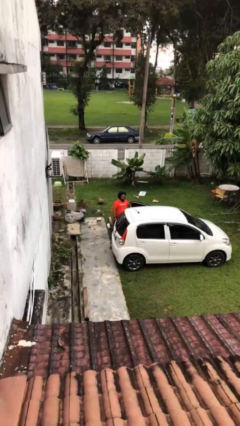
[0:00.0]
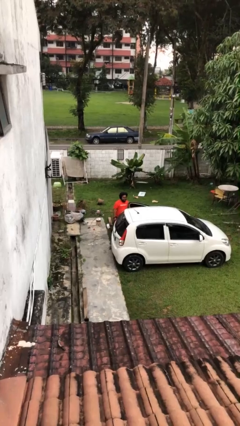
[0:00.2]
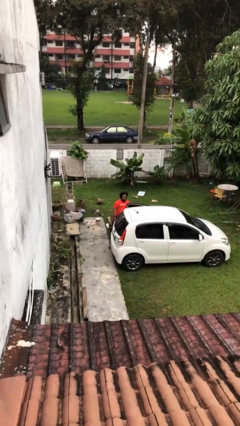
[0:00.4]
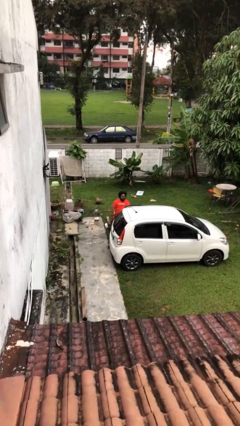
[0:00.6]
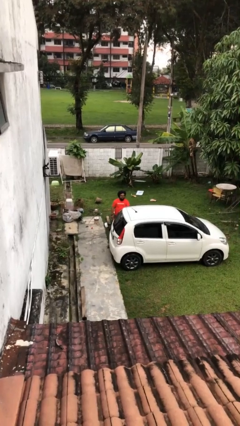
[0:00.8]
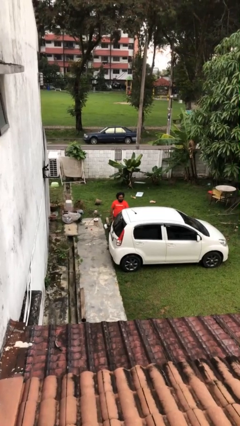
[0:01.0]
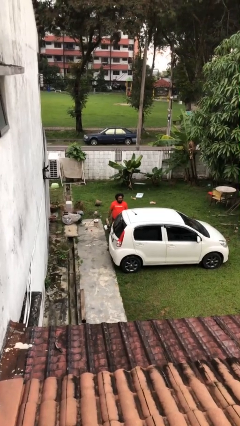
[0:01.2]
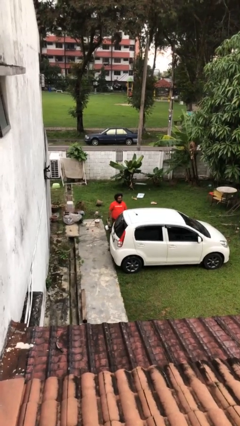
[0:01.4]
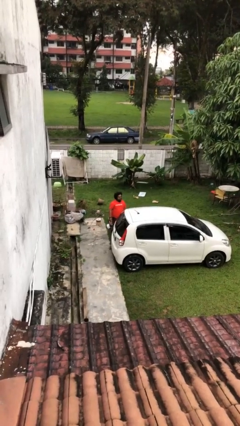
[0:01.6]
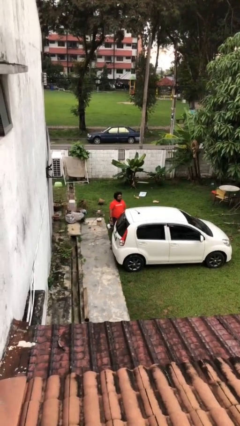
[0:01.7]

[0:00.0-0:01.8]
person closes car door

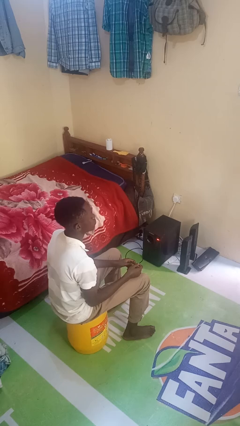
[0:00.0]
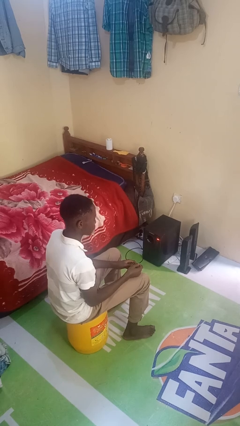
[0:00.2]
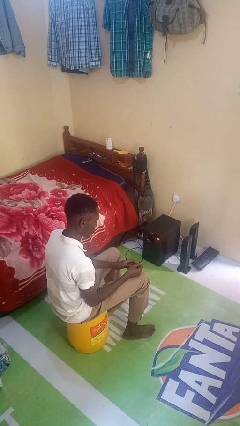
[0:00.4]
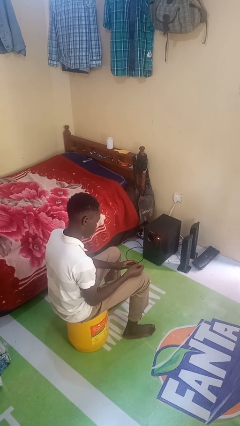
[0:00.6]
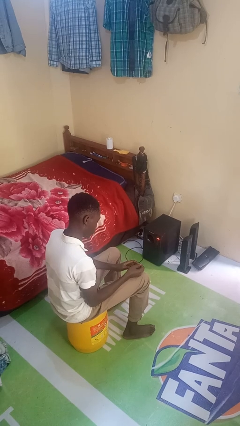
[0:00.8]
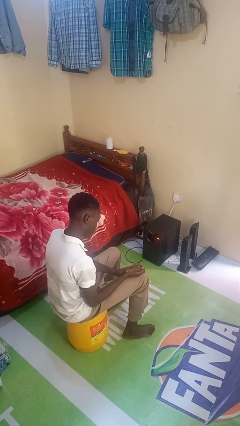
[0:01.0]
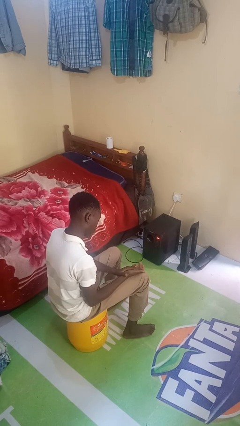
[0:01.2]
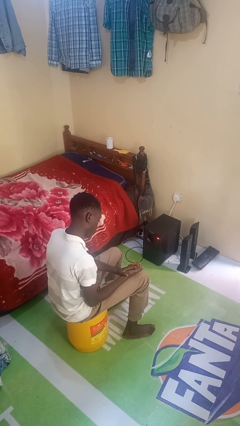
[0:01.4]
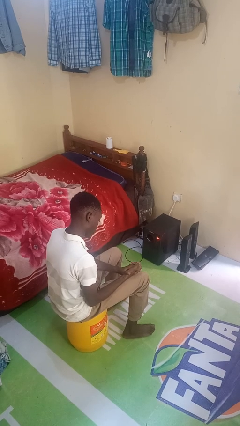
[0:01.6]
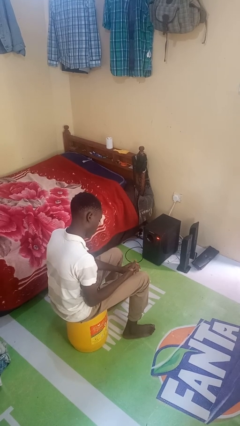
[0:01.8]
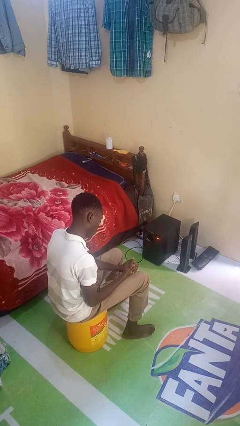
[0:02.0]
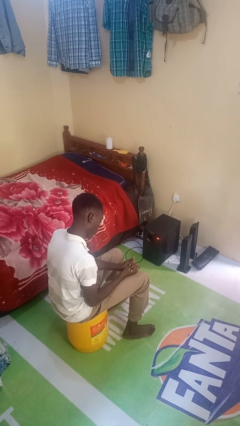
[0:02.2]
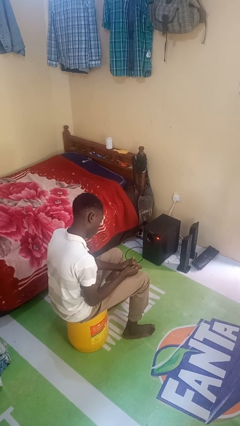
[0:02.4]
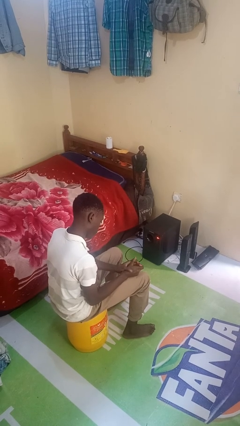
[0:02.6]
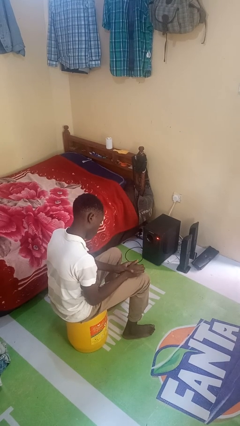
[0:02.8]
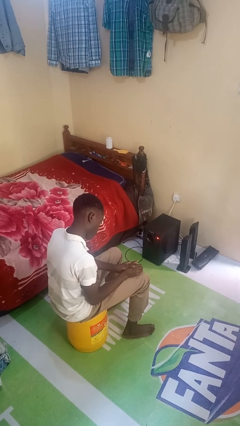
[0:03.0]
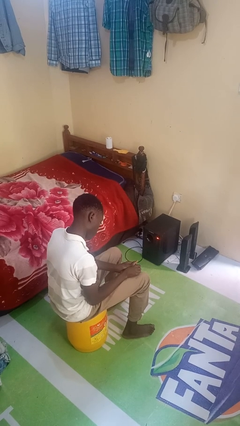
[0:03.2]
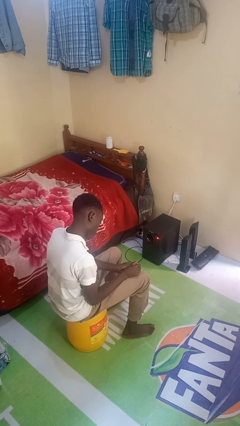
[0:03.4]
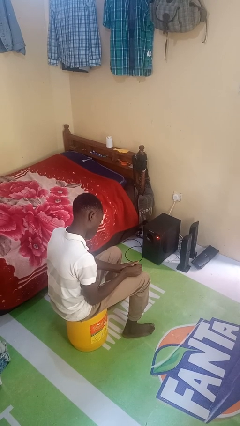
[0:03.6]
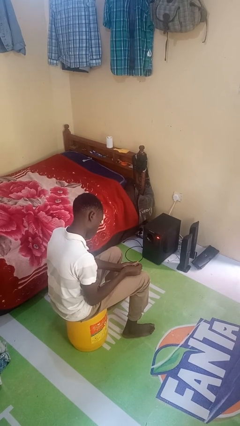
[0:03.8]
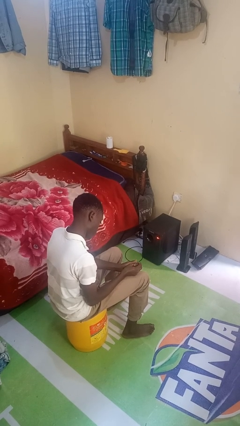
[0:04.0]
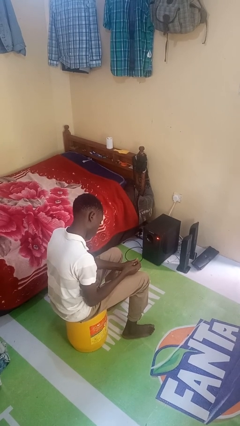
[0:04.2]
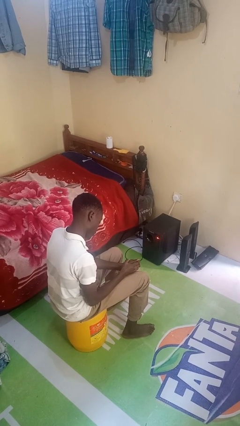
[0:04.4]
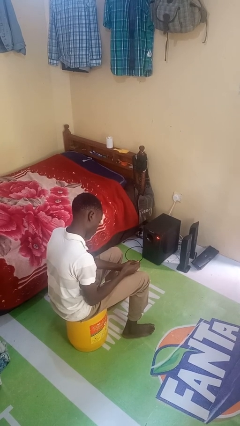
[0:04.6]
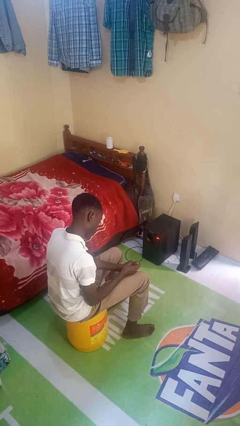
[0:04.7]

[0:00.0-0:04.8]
person looks at hands in lap

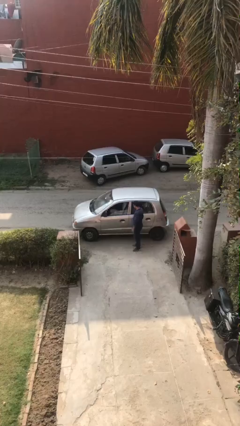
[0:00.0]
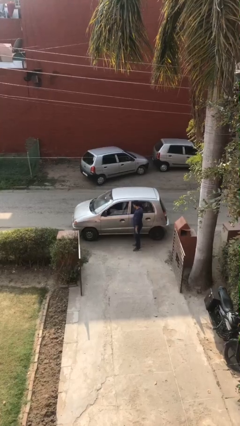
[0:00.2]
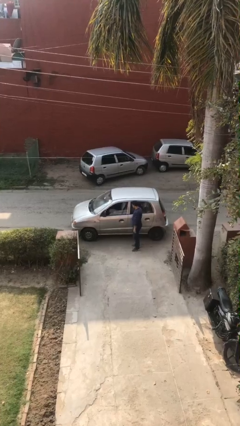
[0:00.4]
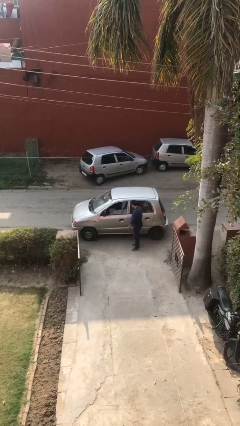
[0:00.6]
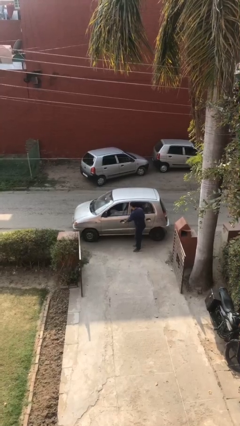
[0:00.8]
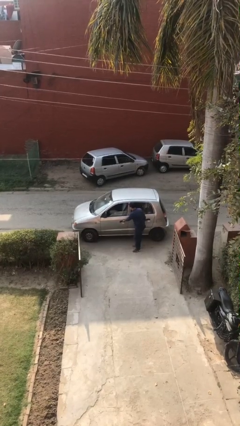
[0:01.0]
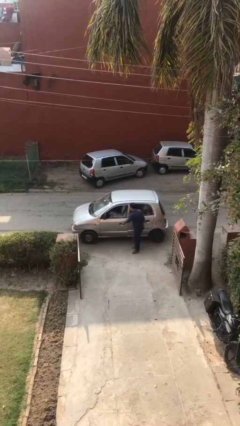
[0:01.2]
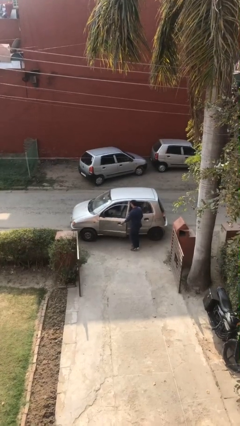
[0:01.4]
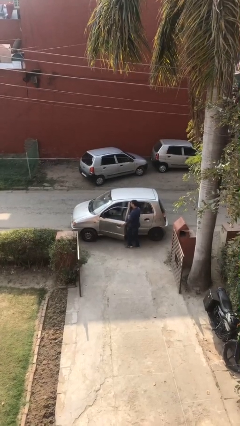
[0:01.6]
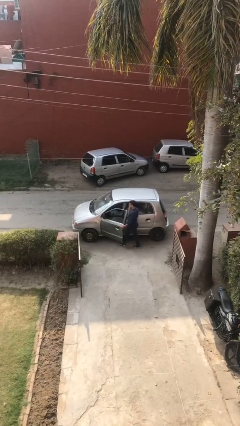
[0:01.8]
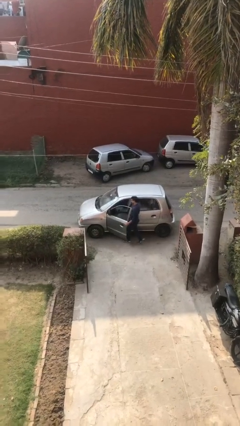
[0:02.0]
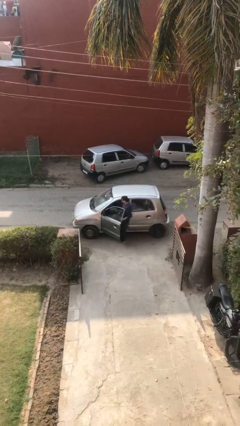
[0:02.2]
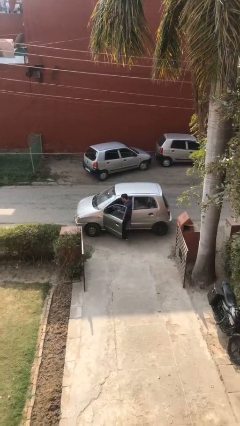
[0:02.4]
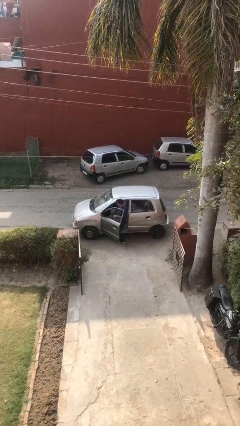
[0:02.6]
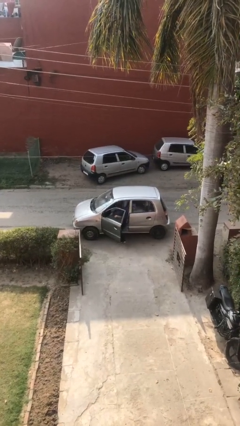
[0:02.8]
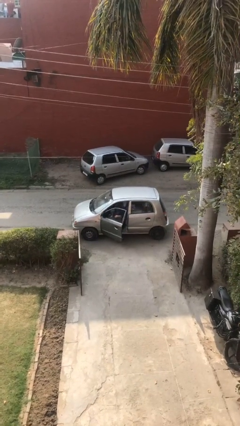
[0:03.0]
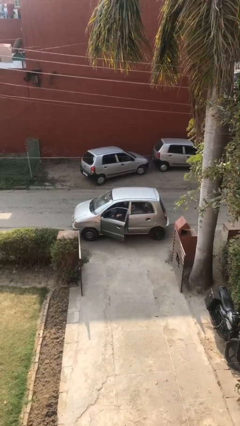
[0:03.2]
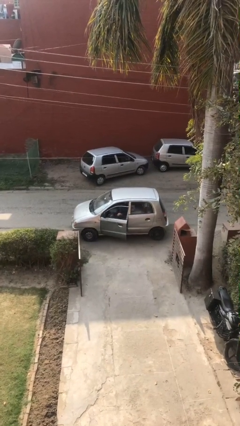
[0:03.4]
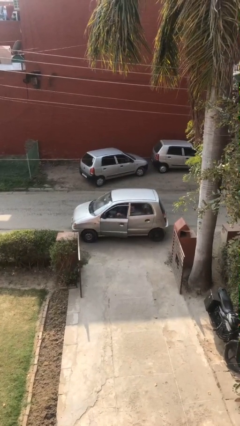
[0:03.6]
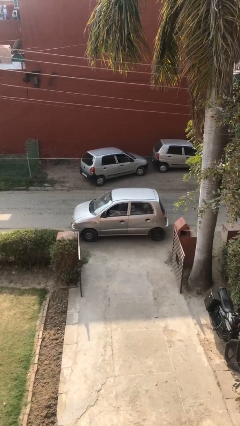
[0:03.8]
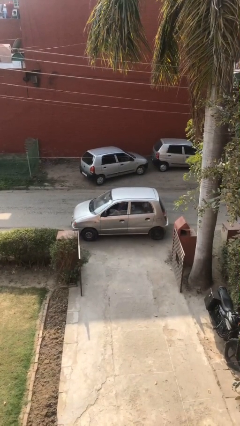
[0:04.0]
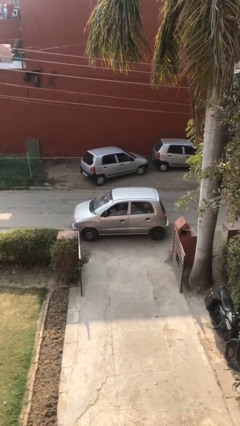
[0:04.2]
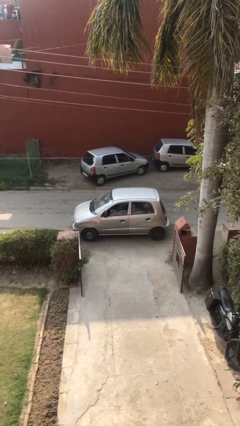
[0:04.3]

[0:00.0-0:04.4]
car picks up person

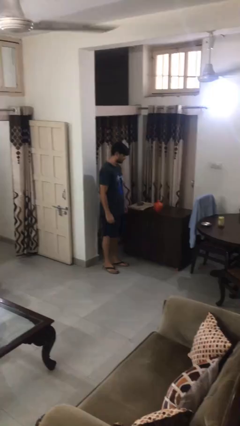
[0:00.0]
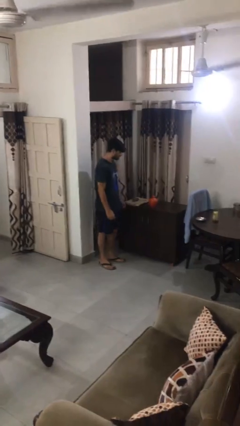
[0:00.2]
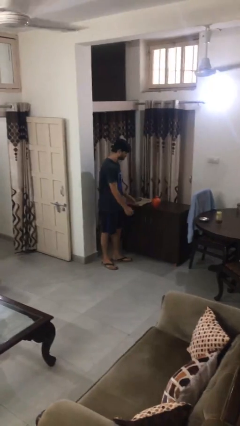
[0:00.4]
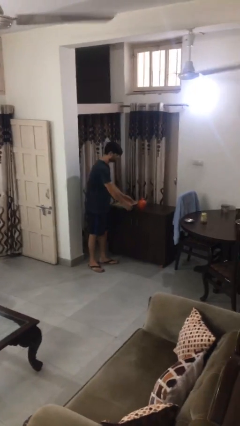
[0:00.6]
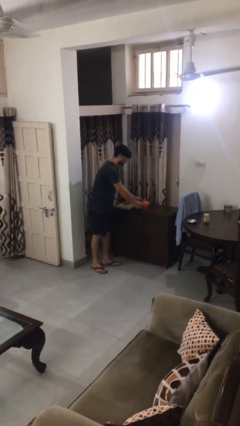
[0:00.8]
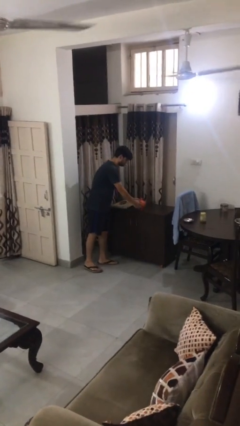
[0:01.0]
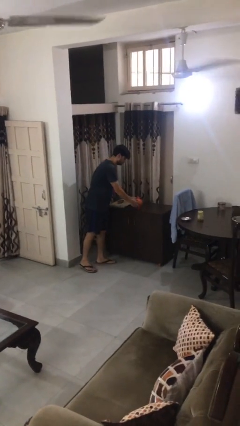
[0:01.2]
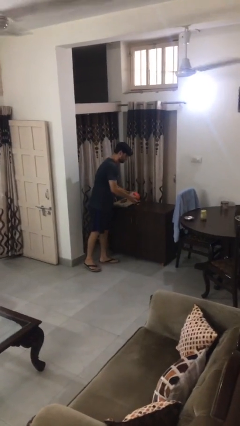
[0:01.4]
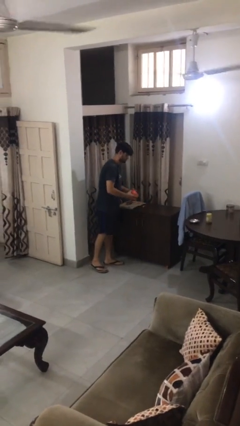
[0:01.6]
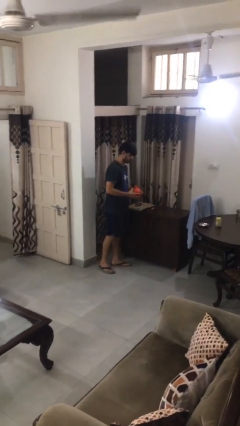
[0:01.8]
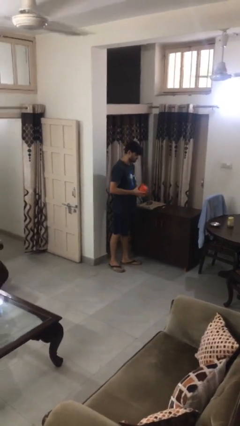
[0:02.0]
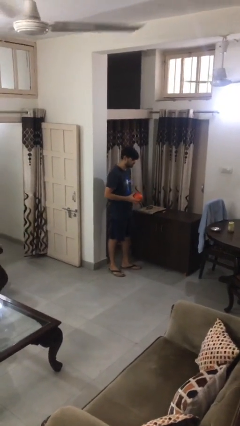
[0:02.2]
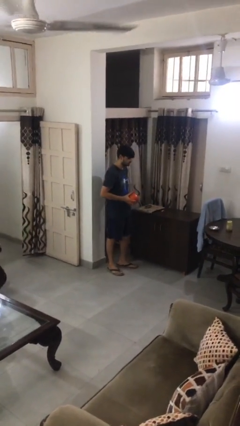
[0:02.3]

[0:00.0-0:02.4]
person picks up object from countertop

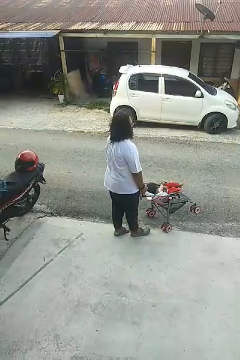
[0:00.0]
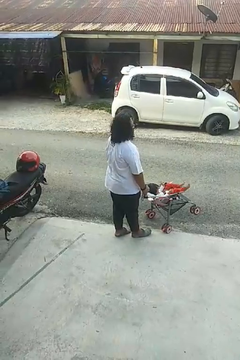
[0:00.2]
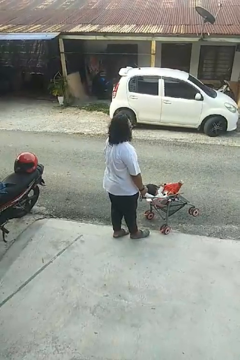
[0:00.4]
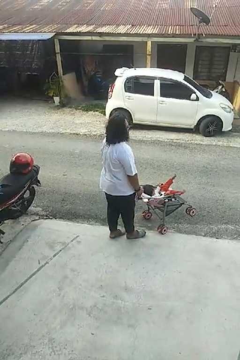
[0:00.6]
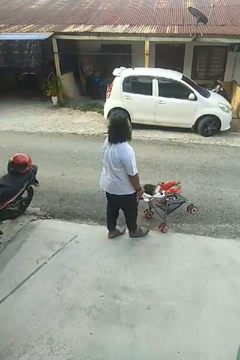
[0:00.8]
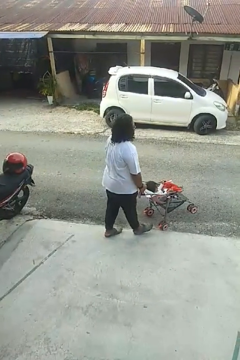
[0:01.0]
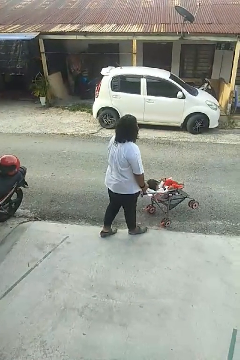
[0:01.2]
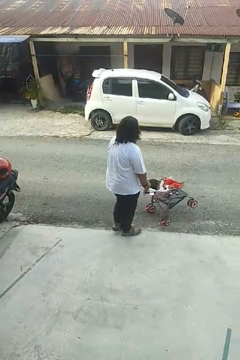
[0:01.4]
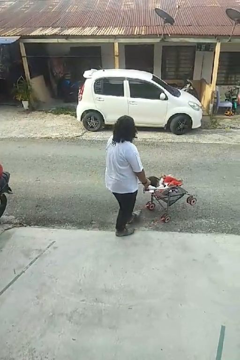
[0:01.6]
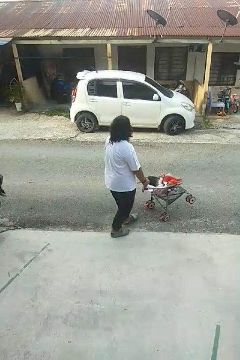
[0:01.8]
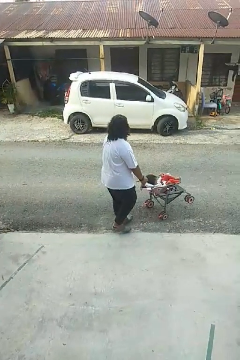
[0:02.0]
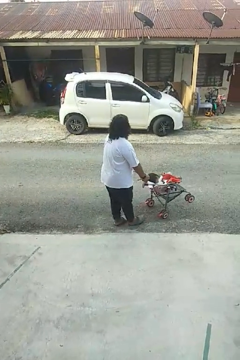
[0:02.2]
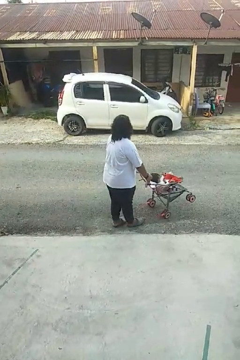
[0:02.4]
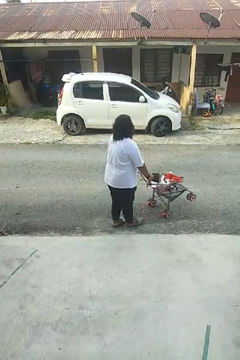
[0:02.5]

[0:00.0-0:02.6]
person pushes wheeled cart

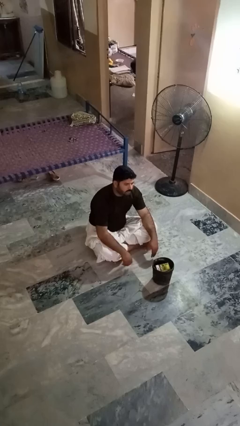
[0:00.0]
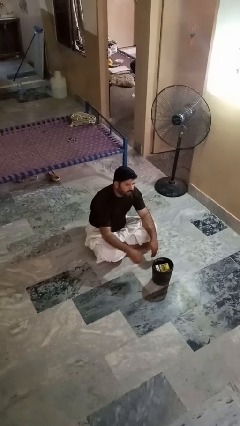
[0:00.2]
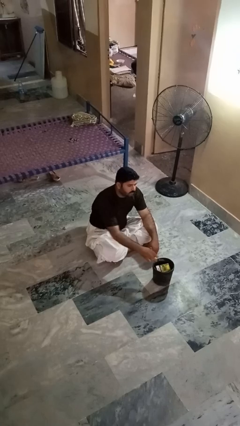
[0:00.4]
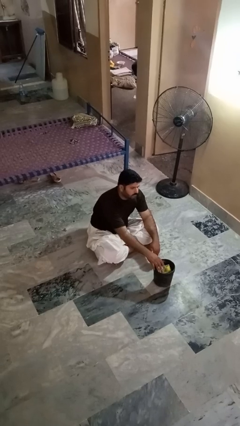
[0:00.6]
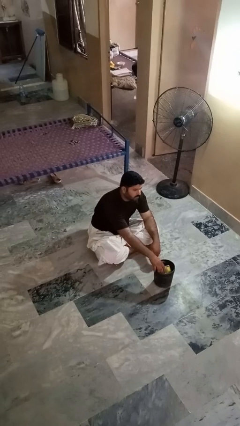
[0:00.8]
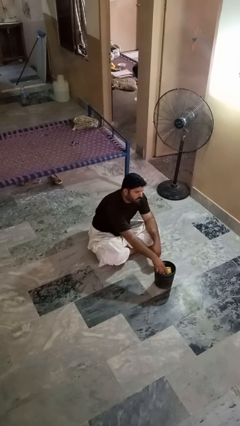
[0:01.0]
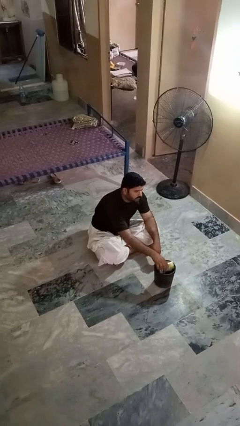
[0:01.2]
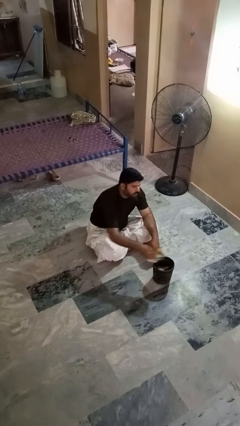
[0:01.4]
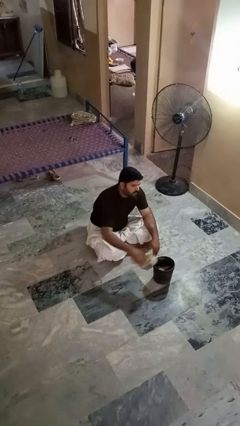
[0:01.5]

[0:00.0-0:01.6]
person takes object from basket
